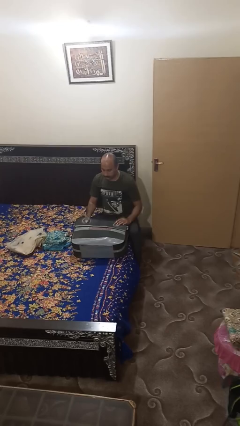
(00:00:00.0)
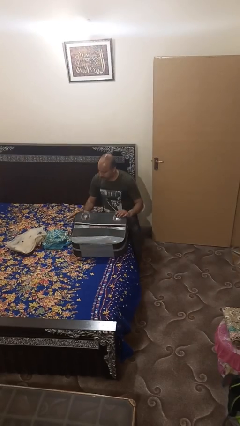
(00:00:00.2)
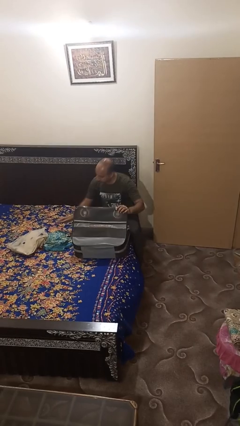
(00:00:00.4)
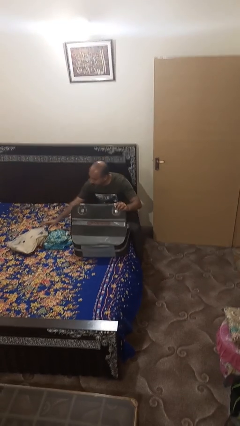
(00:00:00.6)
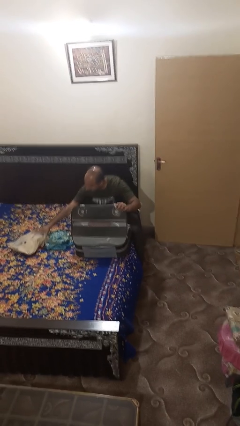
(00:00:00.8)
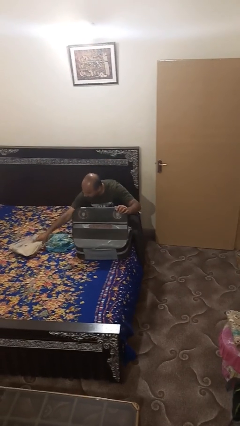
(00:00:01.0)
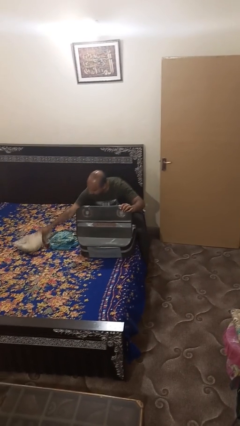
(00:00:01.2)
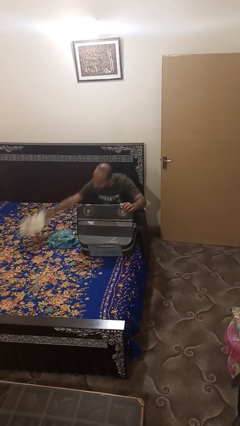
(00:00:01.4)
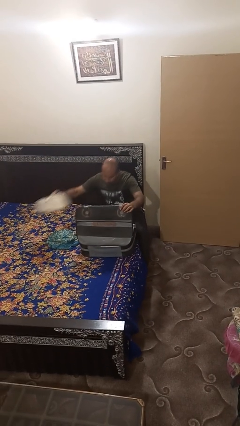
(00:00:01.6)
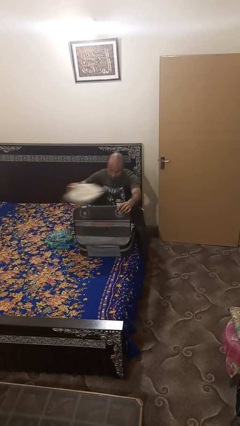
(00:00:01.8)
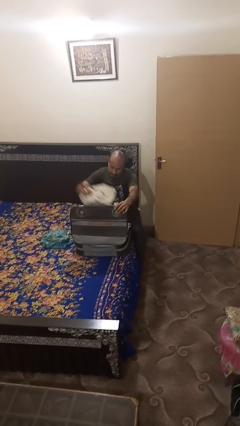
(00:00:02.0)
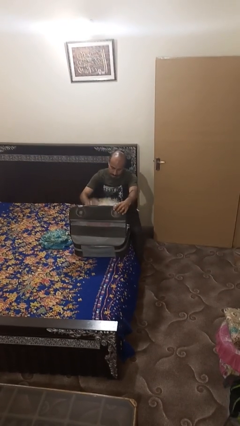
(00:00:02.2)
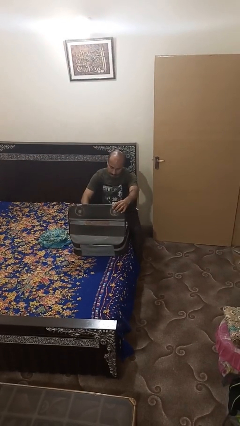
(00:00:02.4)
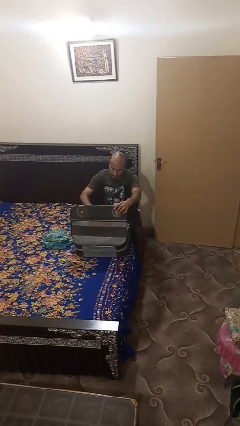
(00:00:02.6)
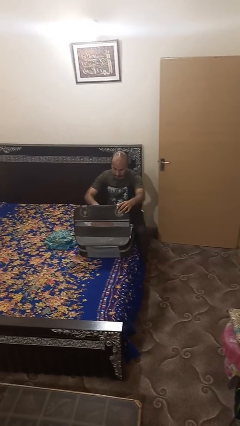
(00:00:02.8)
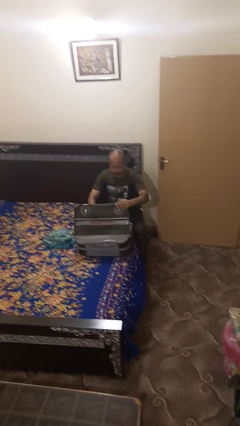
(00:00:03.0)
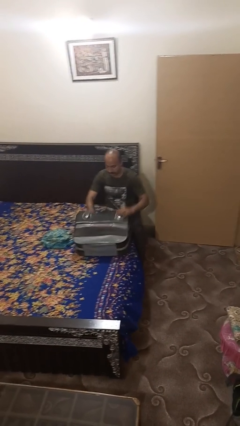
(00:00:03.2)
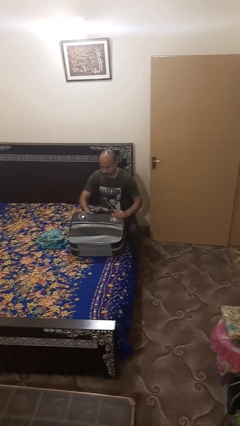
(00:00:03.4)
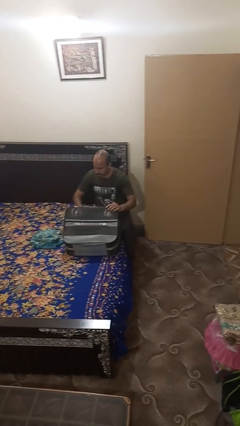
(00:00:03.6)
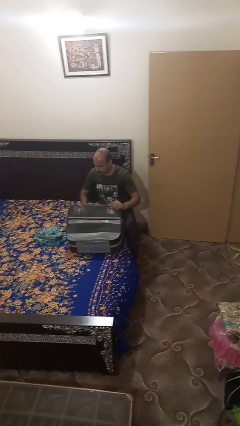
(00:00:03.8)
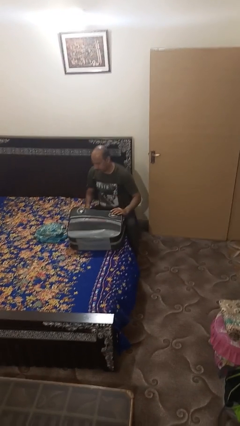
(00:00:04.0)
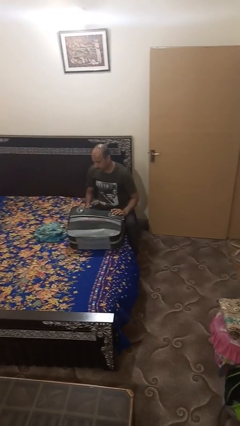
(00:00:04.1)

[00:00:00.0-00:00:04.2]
person loads clothes into suitcase

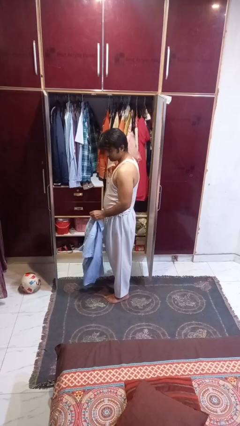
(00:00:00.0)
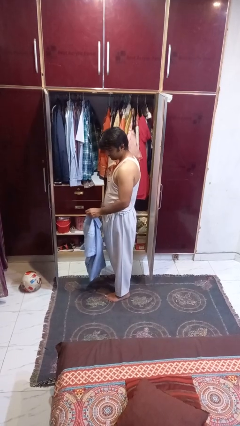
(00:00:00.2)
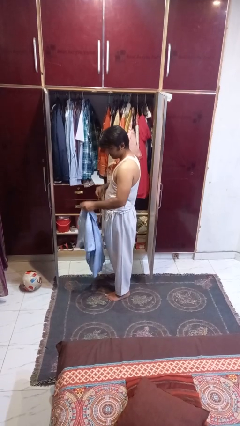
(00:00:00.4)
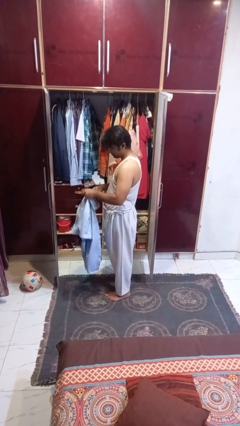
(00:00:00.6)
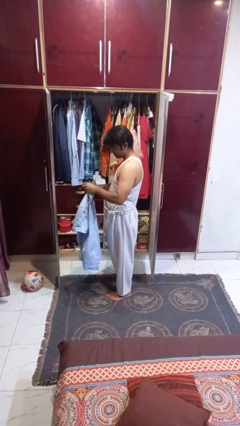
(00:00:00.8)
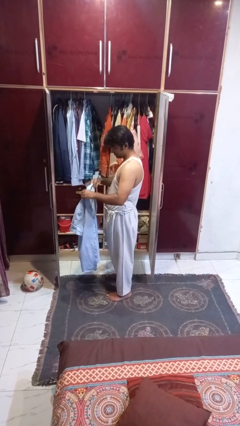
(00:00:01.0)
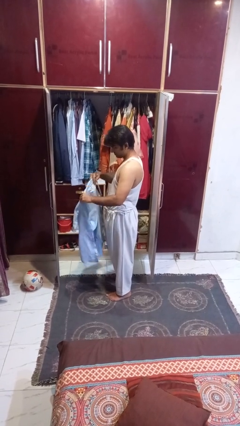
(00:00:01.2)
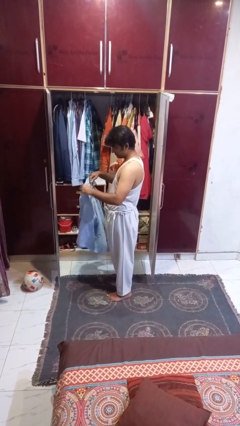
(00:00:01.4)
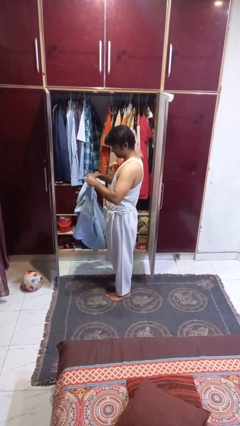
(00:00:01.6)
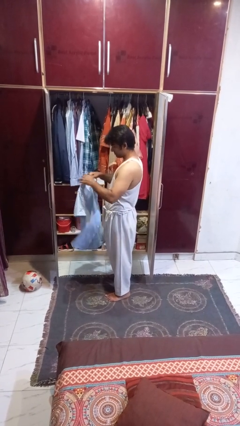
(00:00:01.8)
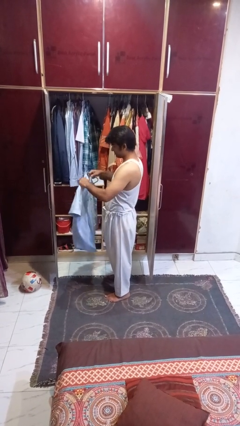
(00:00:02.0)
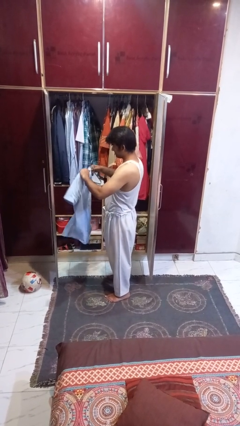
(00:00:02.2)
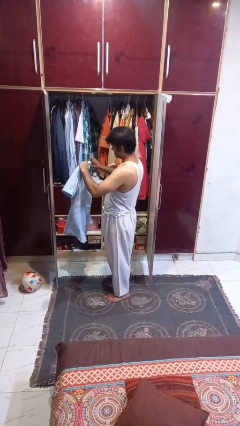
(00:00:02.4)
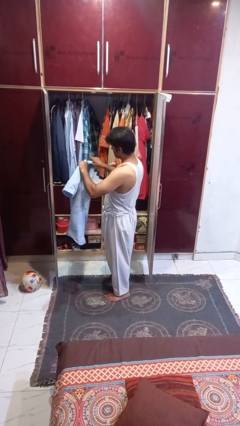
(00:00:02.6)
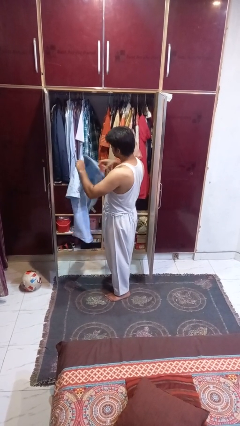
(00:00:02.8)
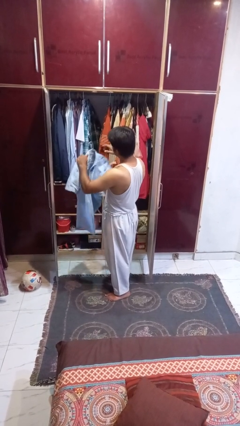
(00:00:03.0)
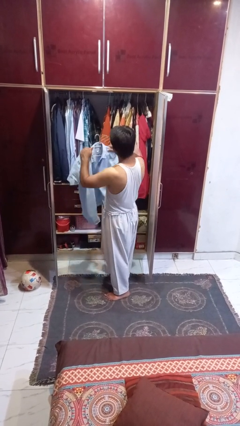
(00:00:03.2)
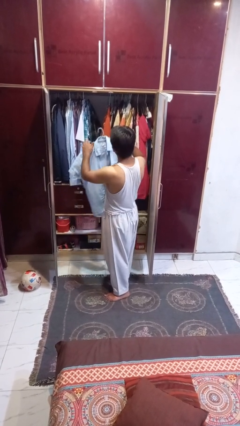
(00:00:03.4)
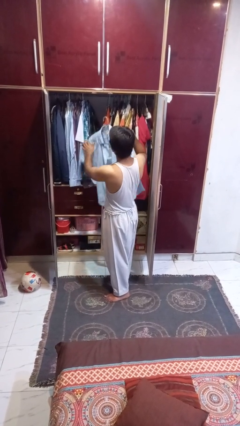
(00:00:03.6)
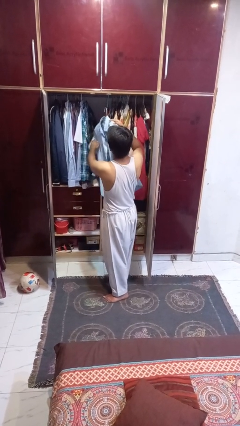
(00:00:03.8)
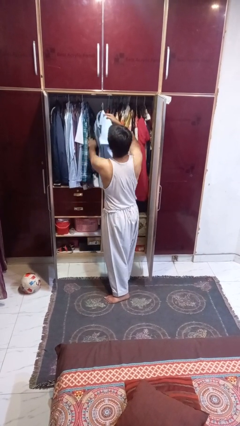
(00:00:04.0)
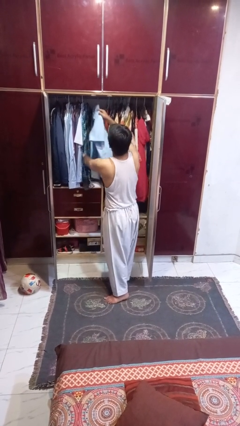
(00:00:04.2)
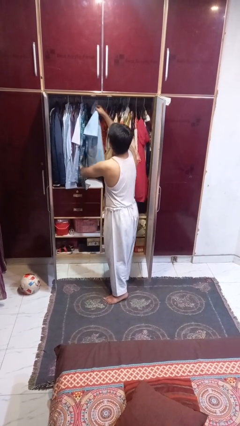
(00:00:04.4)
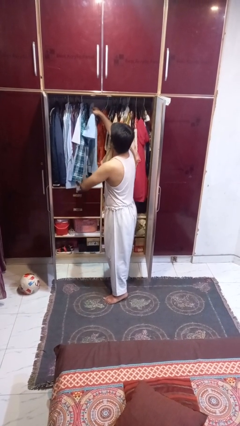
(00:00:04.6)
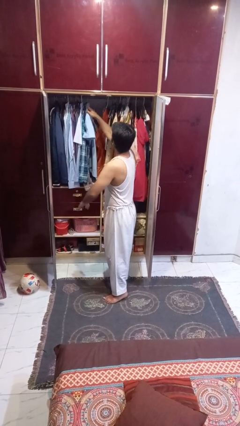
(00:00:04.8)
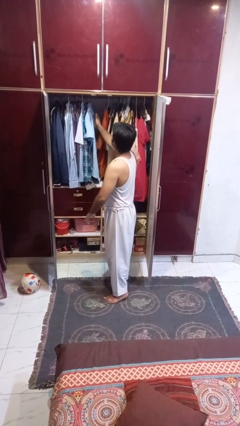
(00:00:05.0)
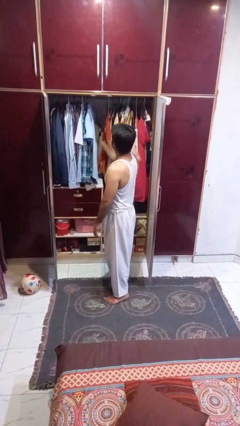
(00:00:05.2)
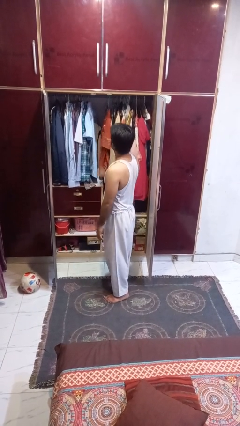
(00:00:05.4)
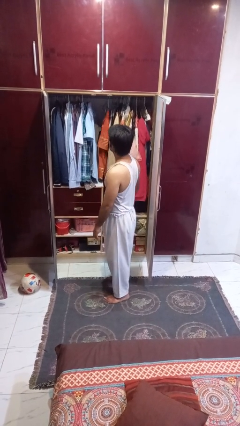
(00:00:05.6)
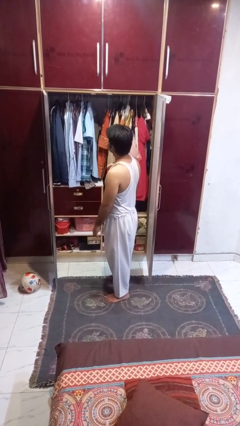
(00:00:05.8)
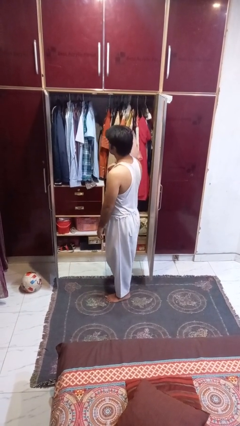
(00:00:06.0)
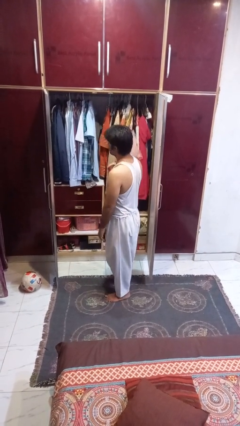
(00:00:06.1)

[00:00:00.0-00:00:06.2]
person puts clothes into closet

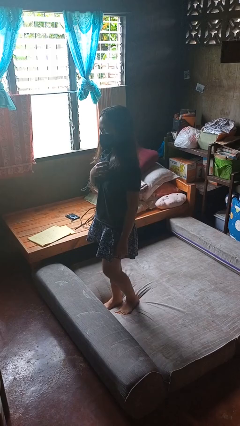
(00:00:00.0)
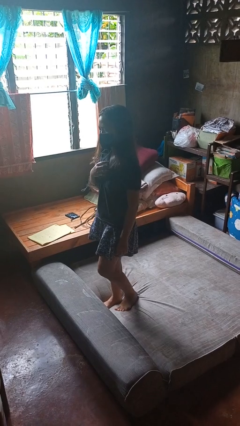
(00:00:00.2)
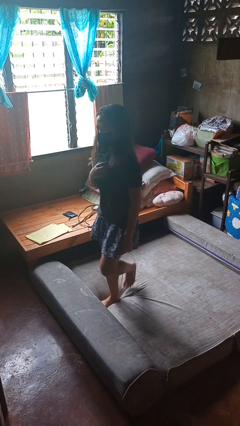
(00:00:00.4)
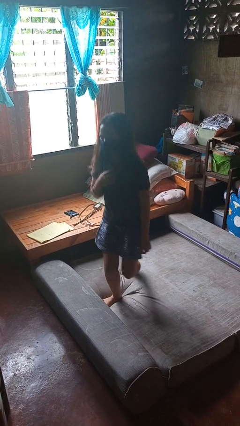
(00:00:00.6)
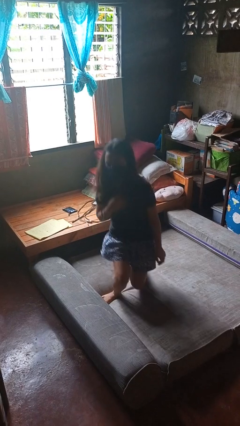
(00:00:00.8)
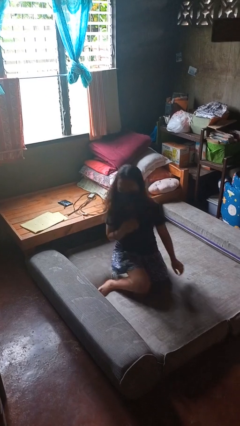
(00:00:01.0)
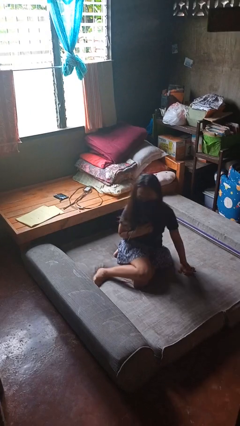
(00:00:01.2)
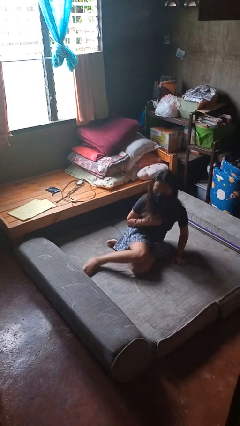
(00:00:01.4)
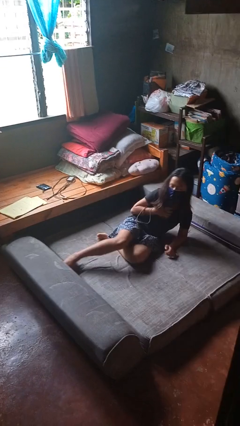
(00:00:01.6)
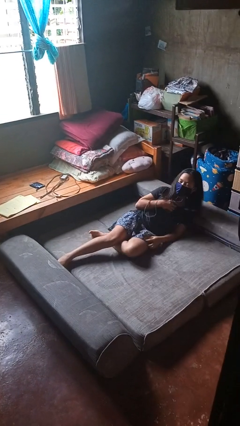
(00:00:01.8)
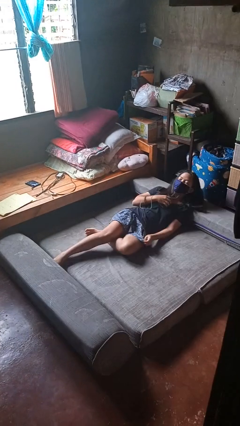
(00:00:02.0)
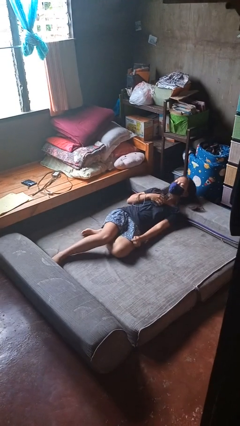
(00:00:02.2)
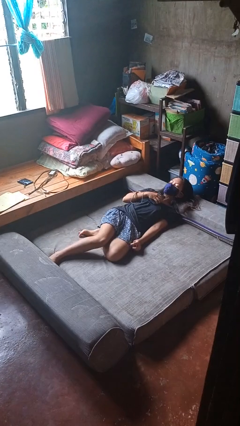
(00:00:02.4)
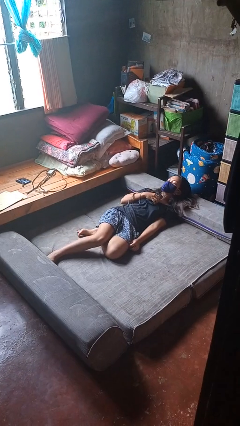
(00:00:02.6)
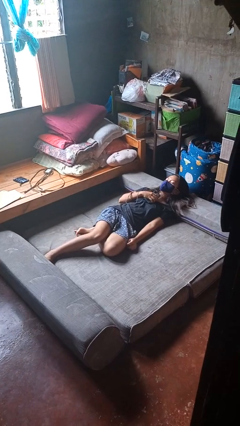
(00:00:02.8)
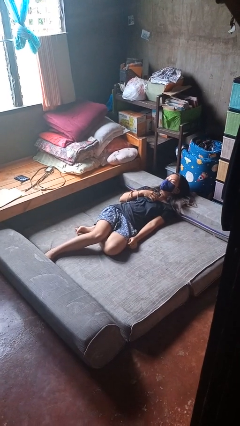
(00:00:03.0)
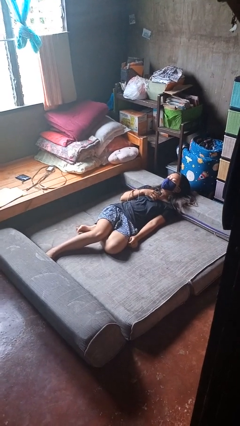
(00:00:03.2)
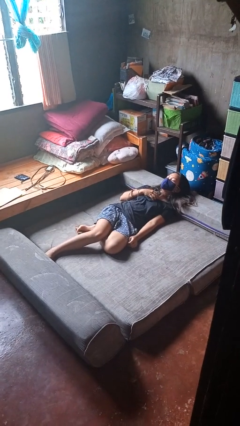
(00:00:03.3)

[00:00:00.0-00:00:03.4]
person lies down on bed

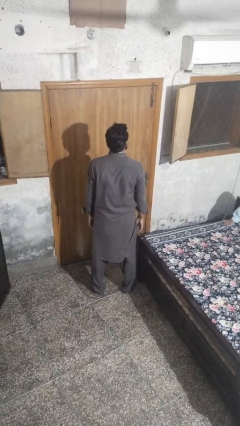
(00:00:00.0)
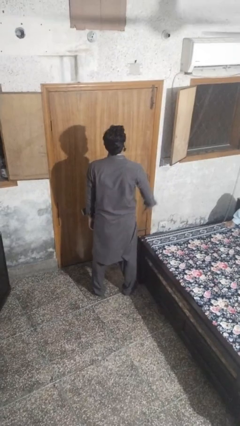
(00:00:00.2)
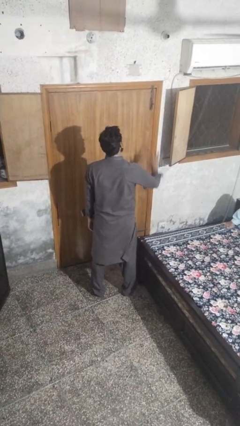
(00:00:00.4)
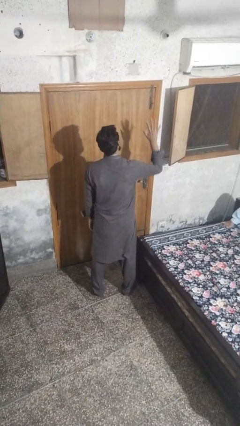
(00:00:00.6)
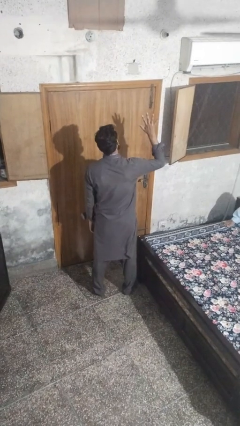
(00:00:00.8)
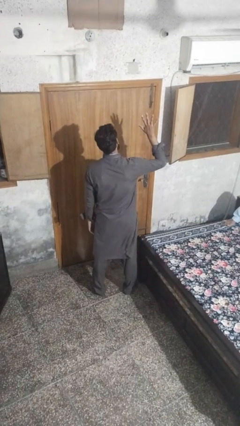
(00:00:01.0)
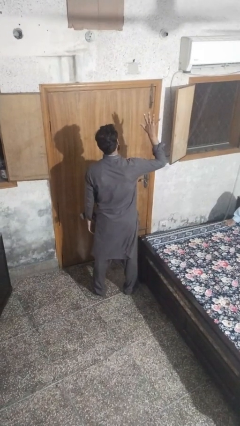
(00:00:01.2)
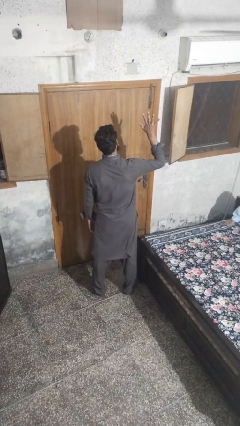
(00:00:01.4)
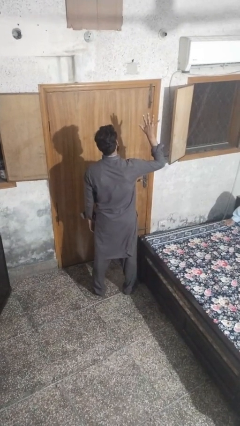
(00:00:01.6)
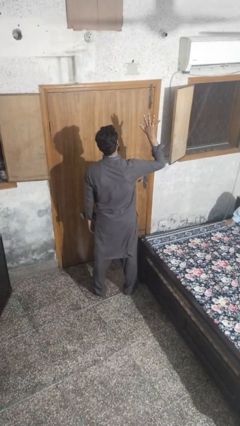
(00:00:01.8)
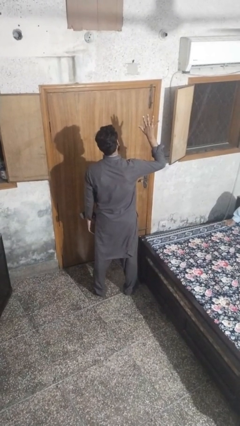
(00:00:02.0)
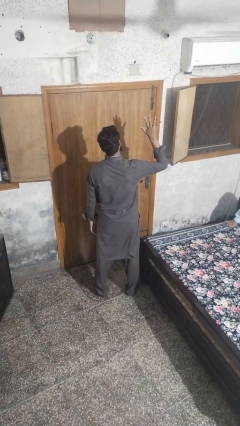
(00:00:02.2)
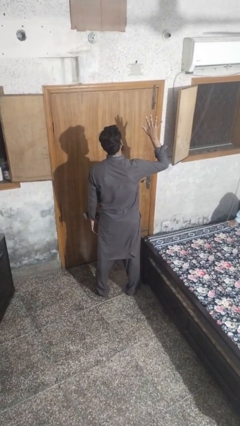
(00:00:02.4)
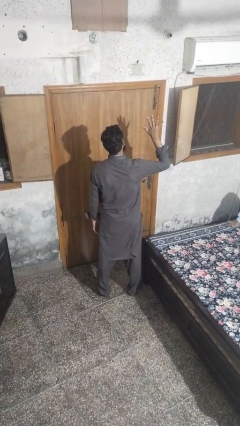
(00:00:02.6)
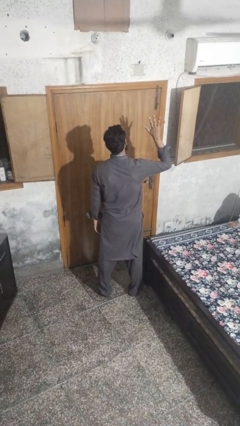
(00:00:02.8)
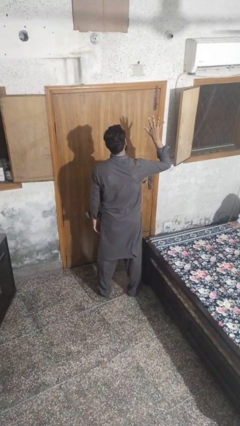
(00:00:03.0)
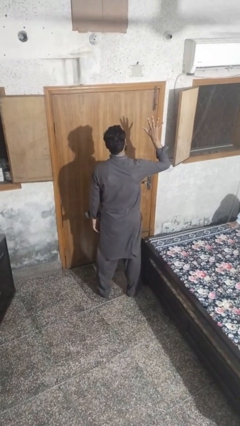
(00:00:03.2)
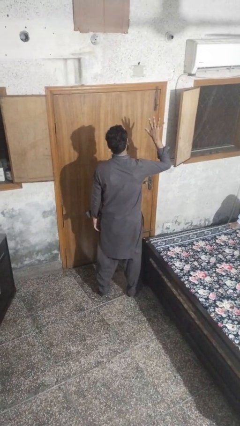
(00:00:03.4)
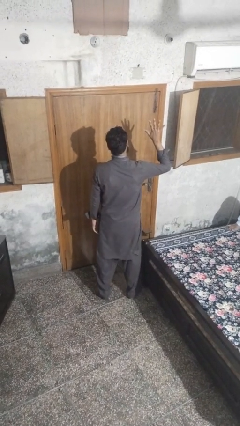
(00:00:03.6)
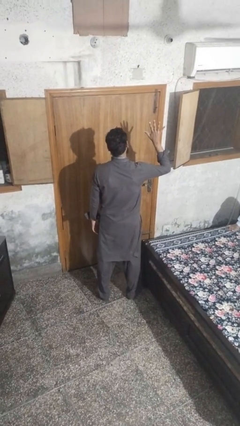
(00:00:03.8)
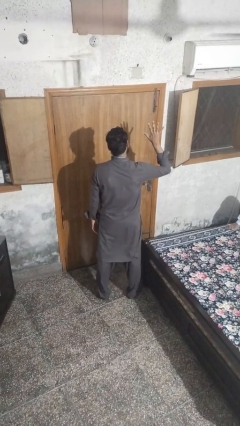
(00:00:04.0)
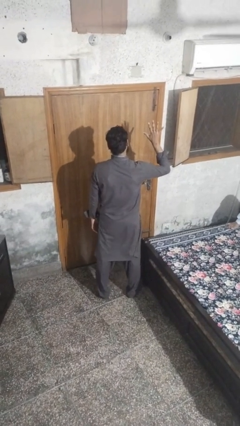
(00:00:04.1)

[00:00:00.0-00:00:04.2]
person gestures number five
